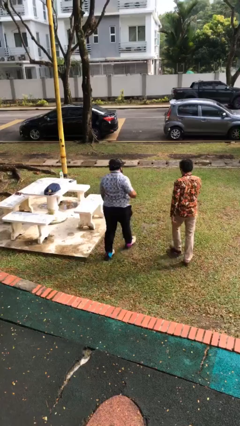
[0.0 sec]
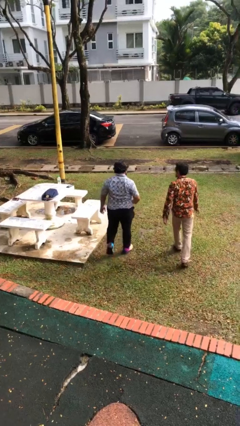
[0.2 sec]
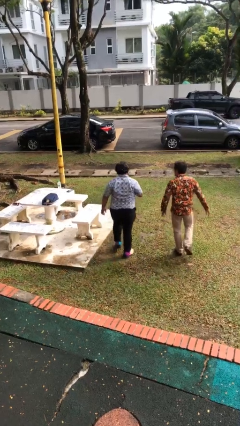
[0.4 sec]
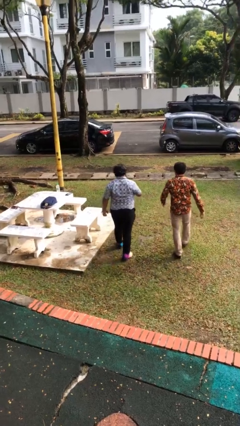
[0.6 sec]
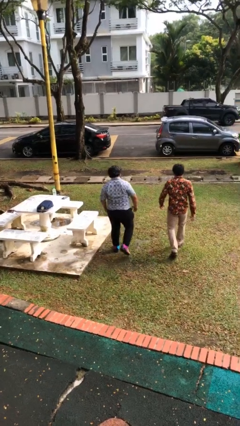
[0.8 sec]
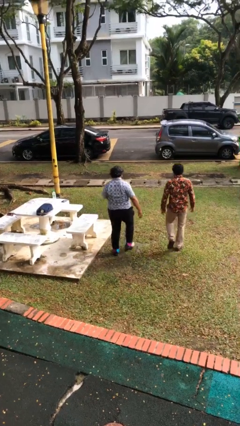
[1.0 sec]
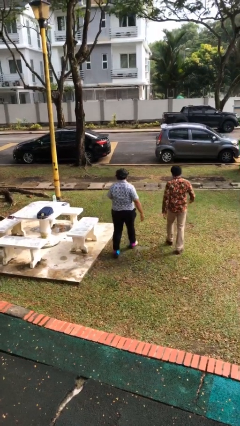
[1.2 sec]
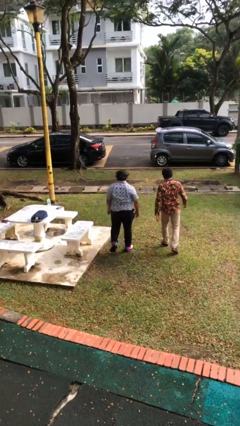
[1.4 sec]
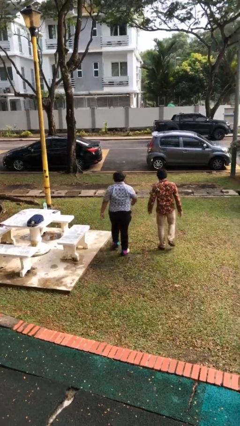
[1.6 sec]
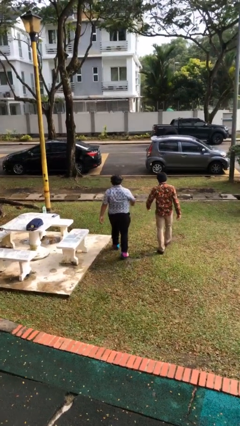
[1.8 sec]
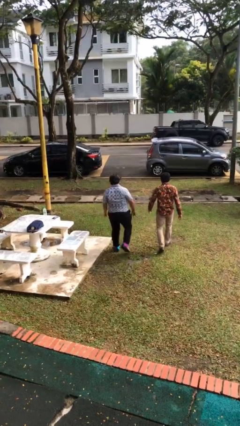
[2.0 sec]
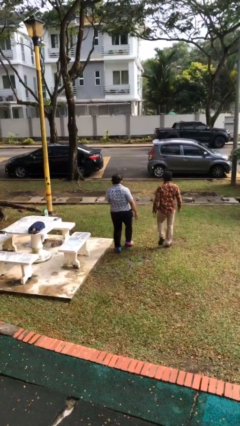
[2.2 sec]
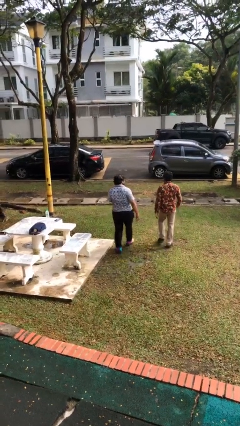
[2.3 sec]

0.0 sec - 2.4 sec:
person talks to person

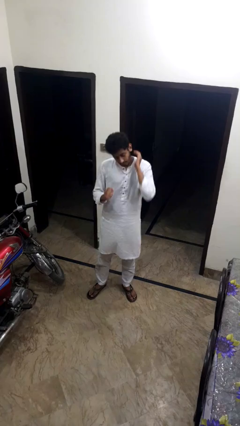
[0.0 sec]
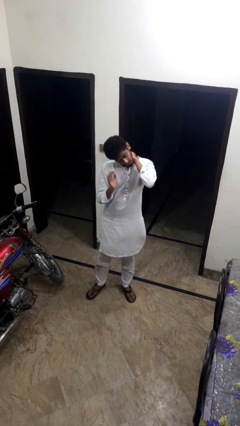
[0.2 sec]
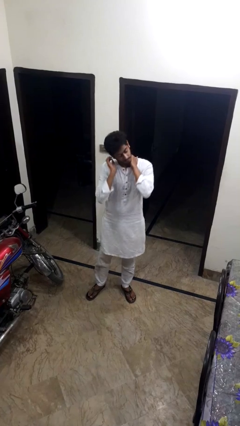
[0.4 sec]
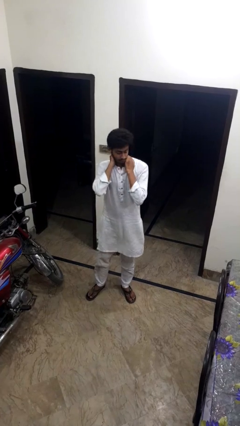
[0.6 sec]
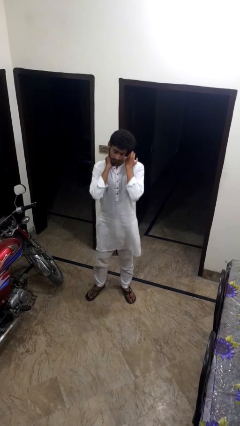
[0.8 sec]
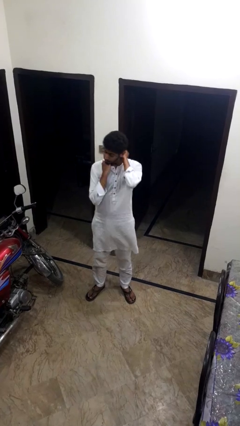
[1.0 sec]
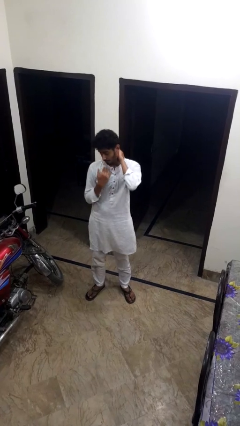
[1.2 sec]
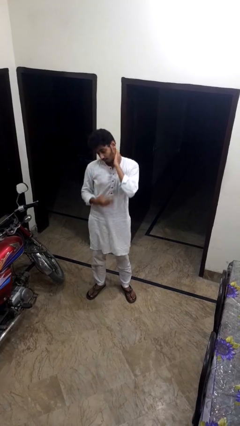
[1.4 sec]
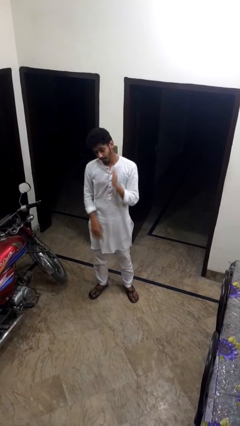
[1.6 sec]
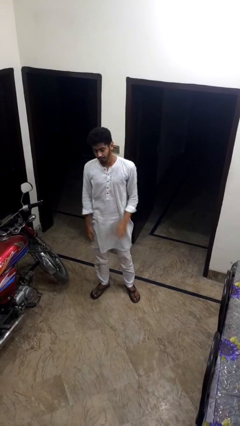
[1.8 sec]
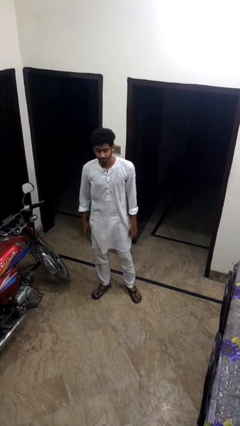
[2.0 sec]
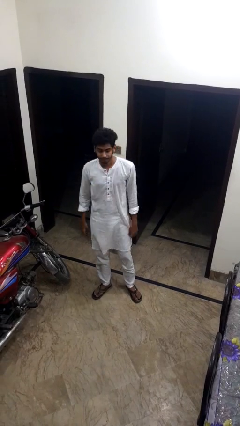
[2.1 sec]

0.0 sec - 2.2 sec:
person rubs neck

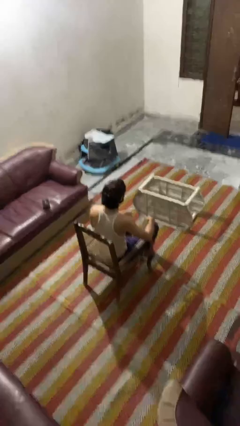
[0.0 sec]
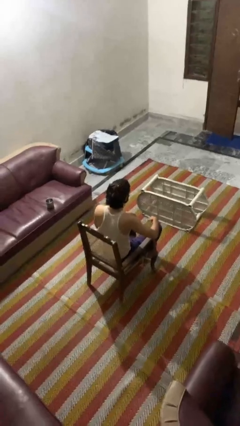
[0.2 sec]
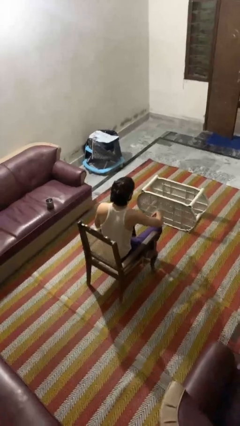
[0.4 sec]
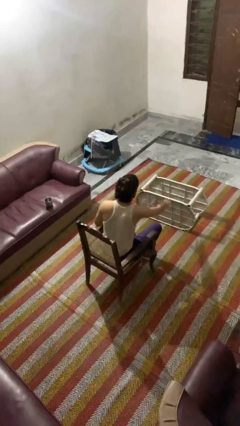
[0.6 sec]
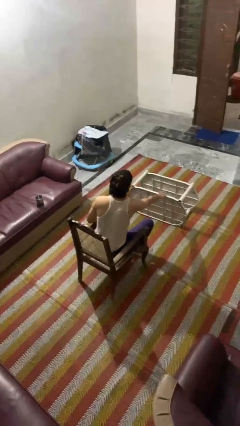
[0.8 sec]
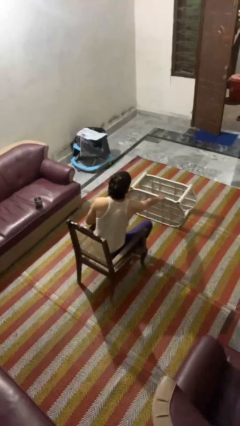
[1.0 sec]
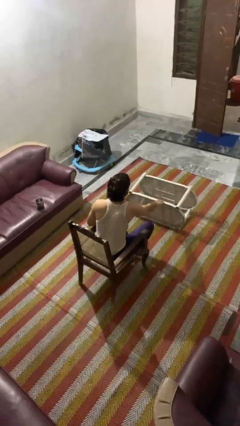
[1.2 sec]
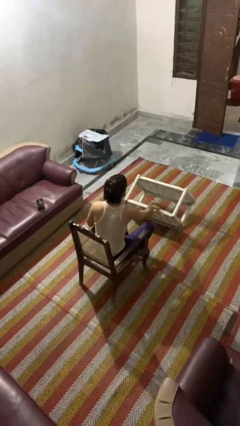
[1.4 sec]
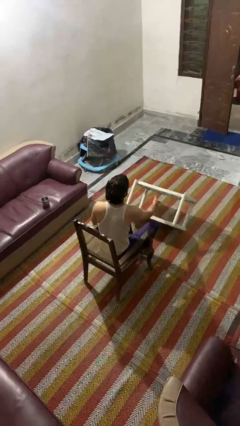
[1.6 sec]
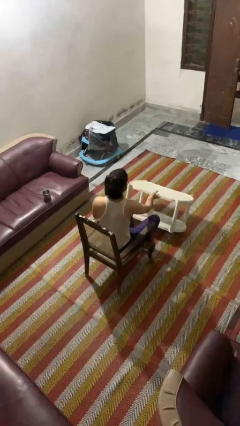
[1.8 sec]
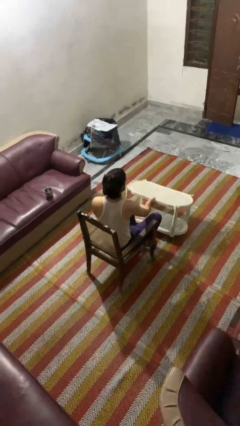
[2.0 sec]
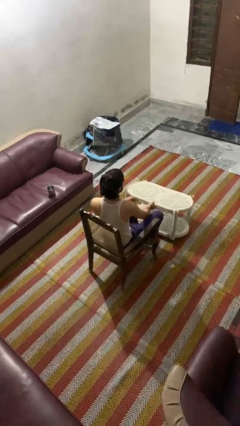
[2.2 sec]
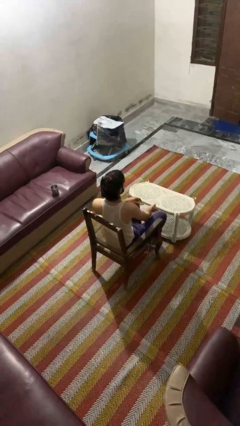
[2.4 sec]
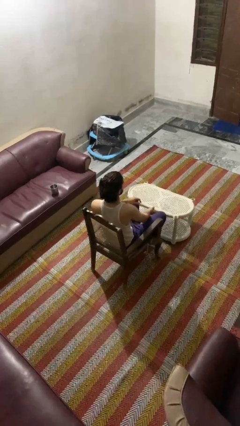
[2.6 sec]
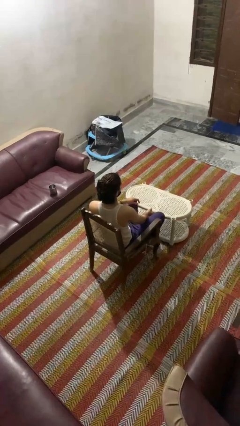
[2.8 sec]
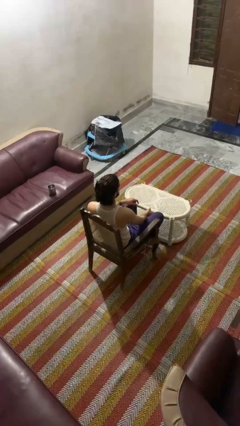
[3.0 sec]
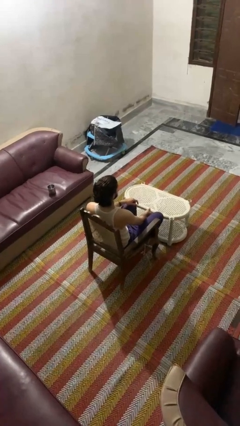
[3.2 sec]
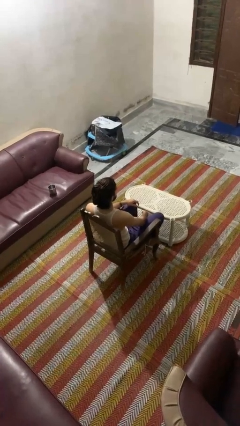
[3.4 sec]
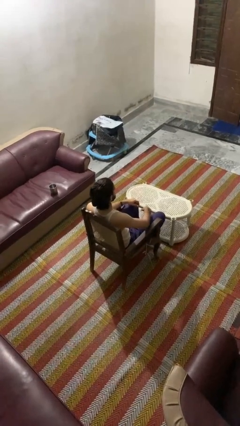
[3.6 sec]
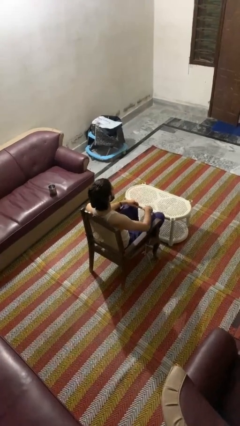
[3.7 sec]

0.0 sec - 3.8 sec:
person sets upright furniture

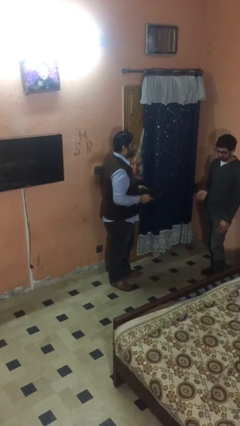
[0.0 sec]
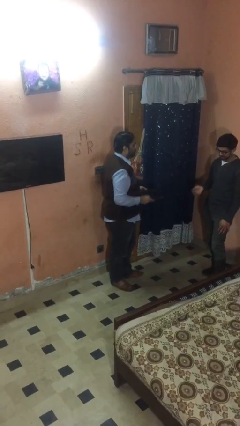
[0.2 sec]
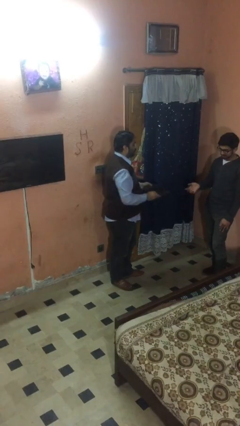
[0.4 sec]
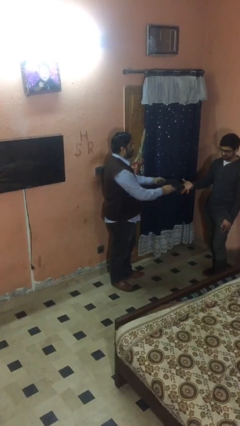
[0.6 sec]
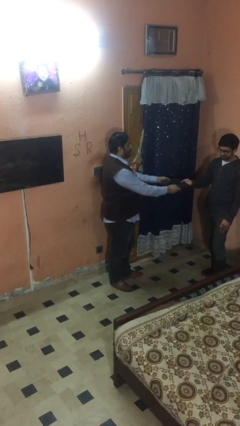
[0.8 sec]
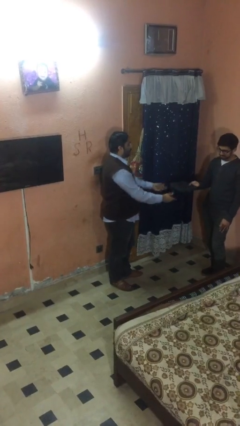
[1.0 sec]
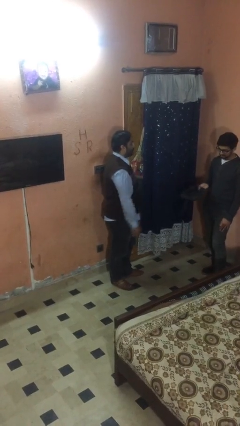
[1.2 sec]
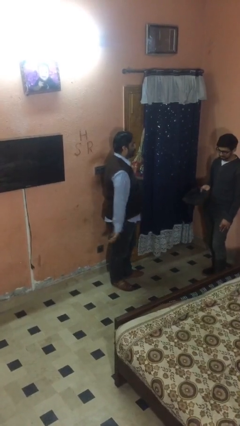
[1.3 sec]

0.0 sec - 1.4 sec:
person transfers object to person

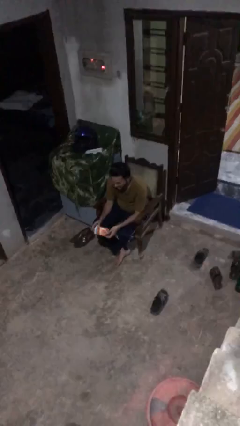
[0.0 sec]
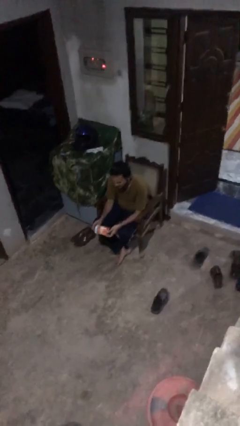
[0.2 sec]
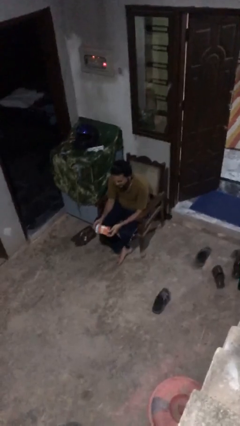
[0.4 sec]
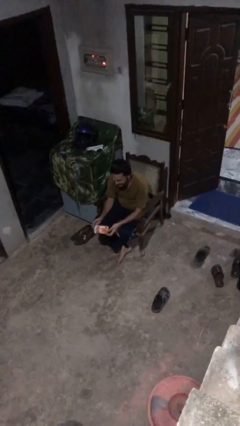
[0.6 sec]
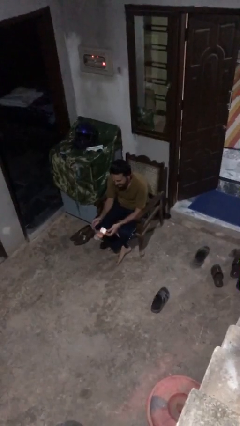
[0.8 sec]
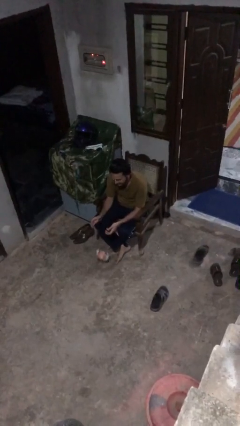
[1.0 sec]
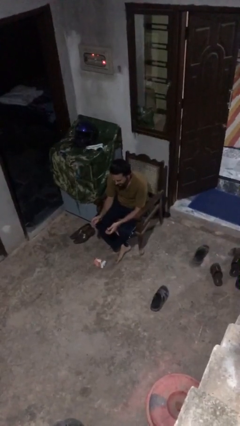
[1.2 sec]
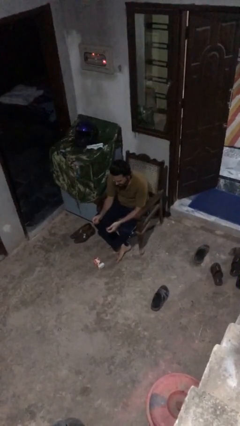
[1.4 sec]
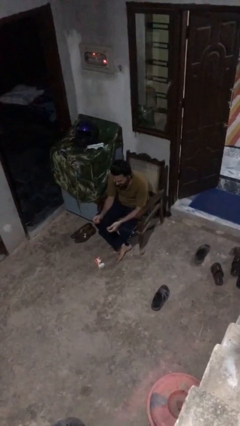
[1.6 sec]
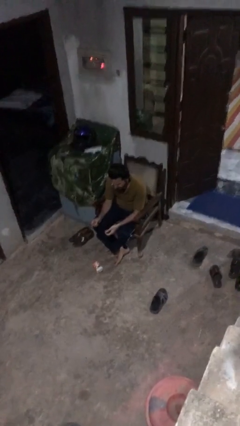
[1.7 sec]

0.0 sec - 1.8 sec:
person drops object

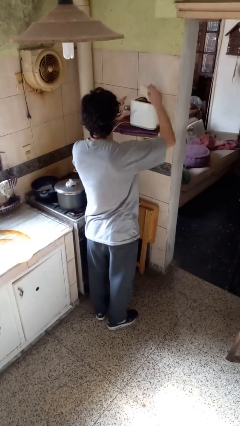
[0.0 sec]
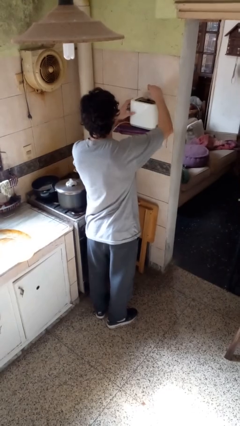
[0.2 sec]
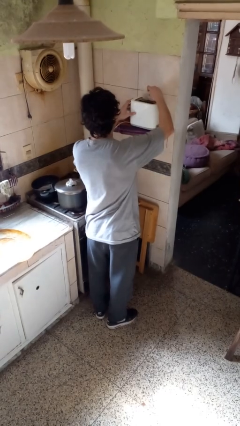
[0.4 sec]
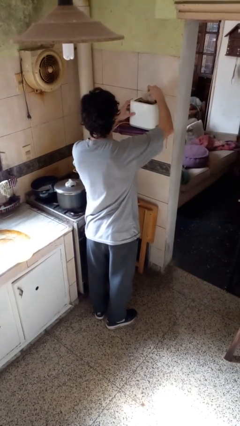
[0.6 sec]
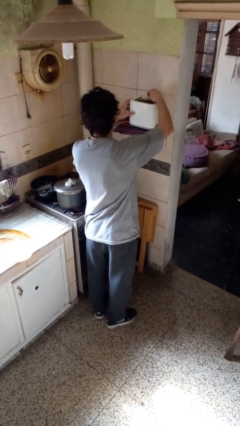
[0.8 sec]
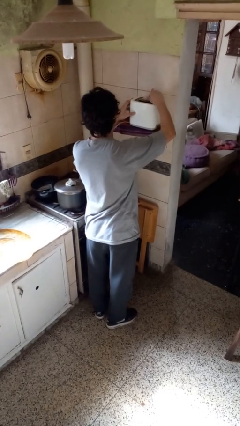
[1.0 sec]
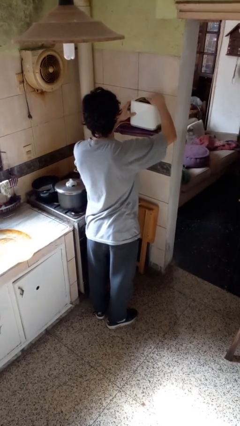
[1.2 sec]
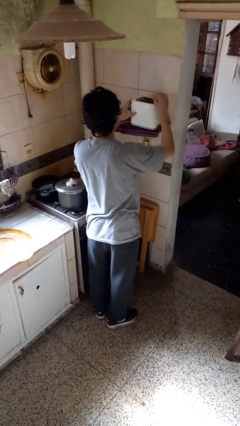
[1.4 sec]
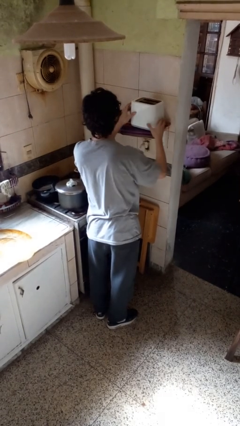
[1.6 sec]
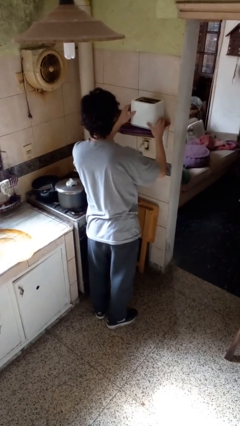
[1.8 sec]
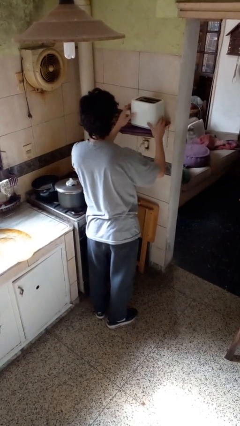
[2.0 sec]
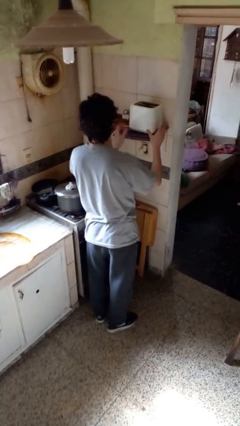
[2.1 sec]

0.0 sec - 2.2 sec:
person puts object into toaster

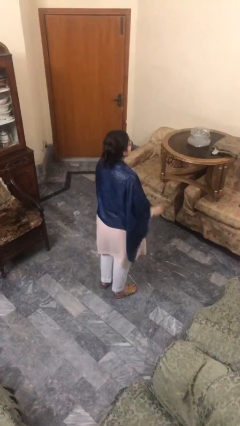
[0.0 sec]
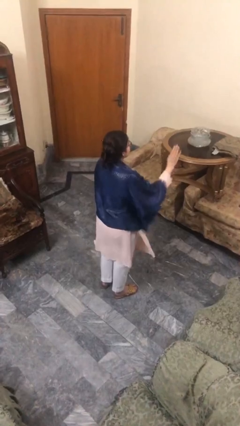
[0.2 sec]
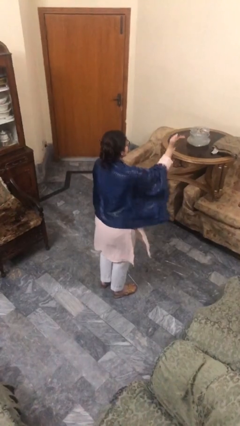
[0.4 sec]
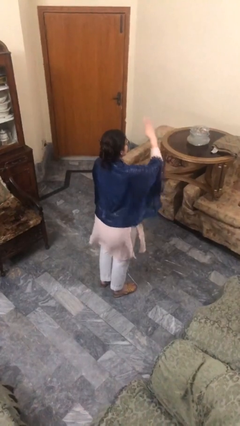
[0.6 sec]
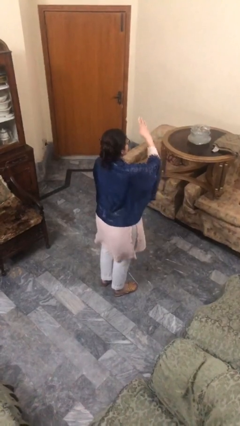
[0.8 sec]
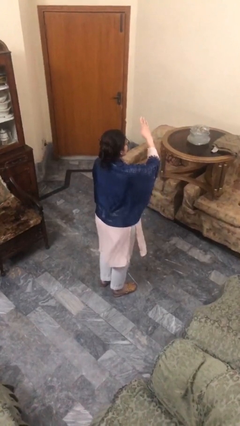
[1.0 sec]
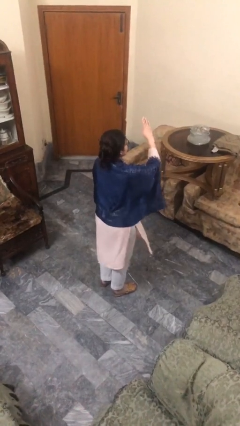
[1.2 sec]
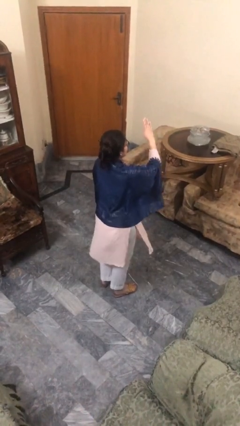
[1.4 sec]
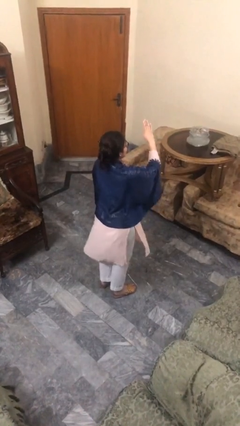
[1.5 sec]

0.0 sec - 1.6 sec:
person gestures swipe left

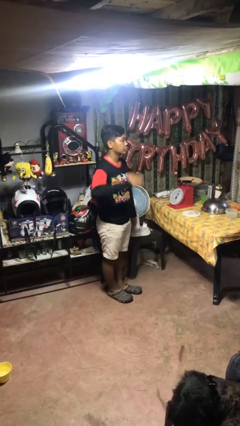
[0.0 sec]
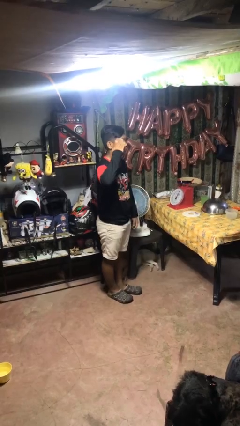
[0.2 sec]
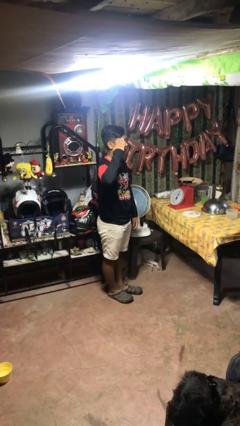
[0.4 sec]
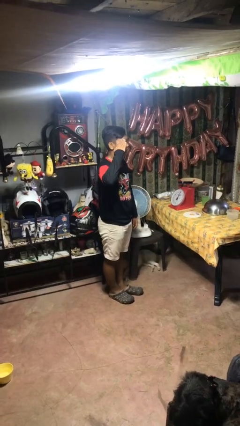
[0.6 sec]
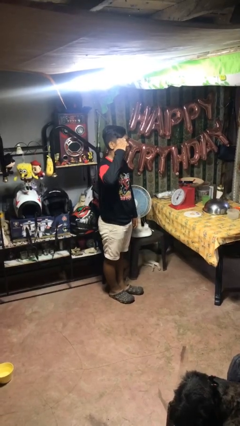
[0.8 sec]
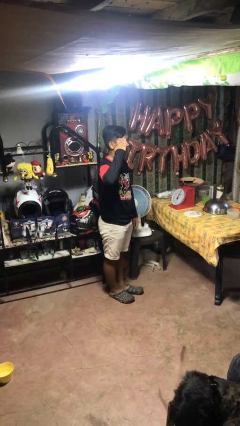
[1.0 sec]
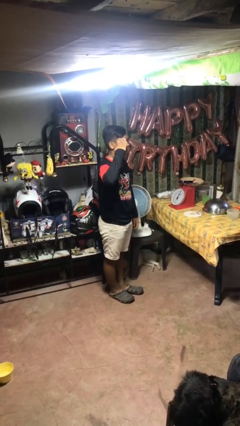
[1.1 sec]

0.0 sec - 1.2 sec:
person salutes

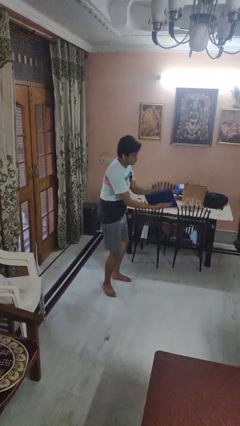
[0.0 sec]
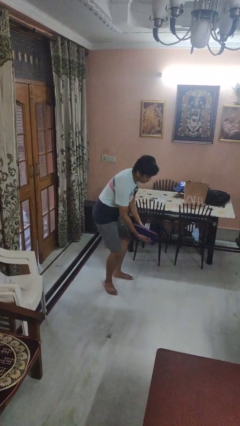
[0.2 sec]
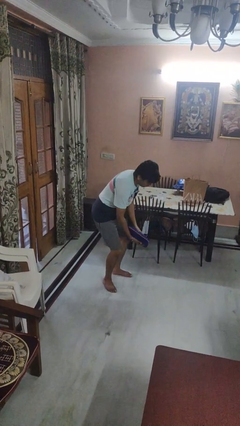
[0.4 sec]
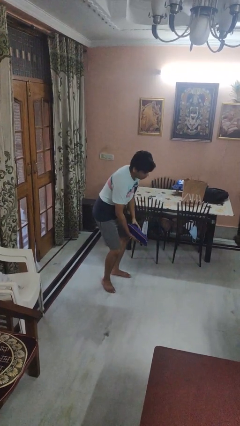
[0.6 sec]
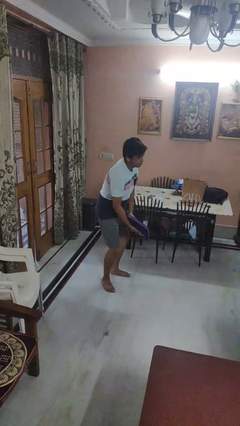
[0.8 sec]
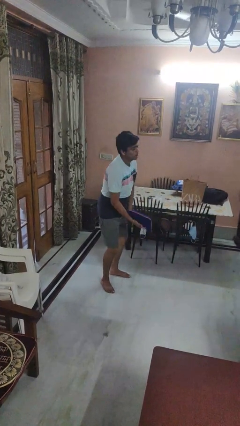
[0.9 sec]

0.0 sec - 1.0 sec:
person catches dropped object
